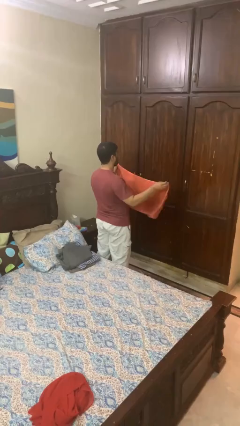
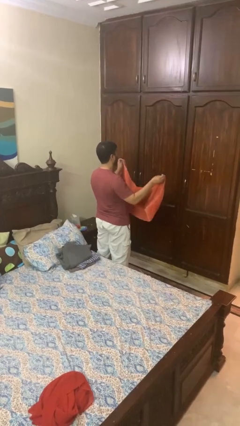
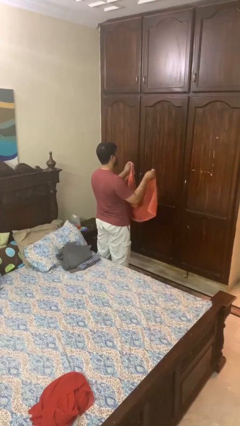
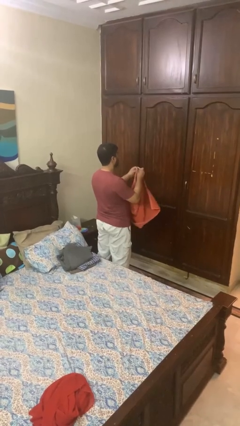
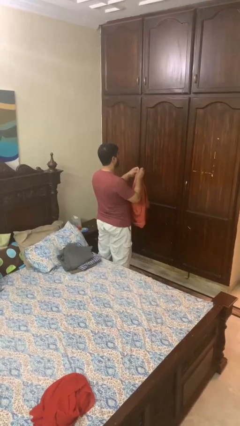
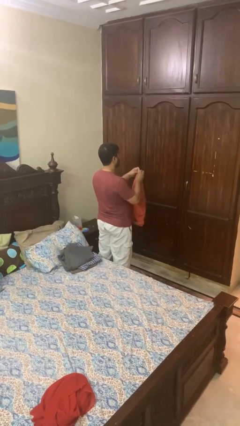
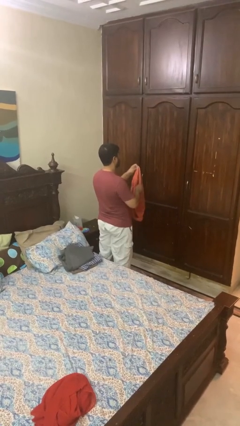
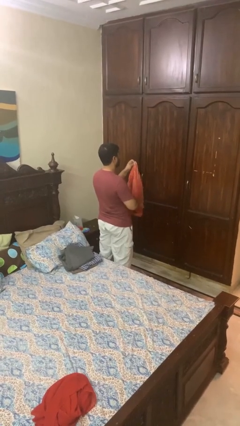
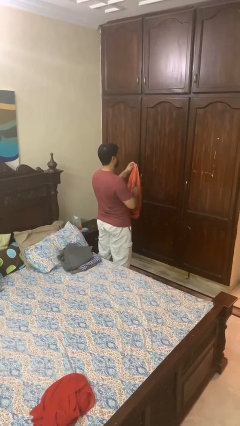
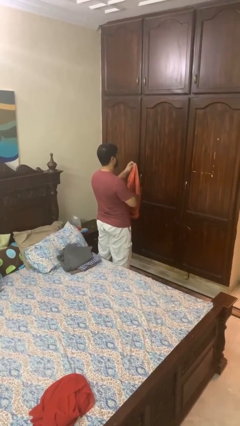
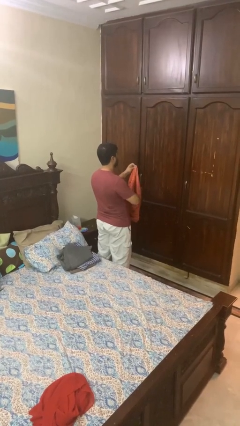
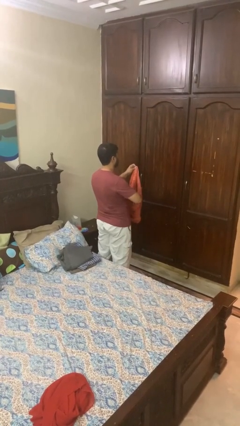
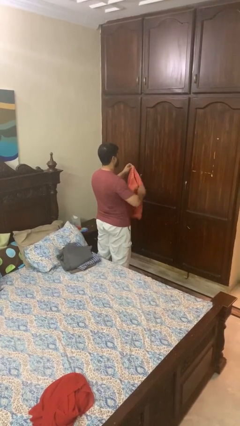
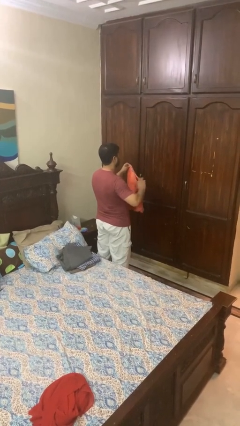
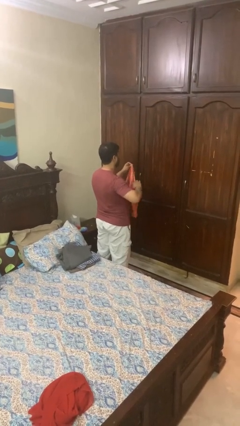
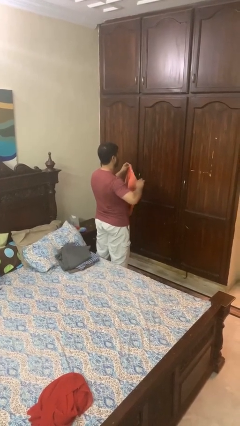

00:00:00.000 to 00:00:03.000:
person folds towel

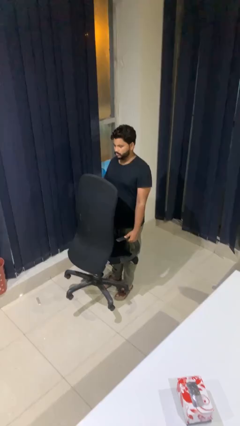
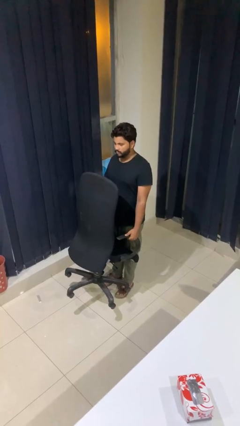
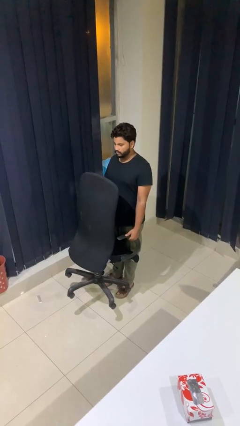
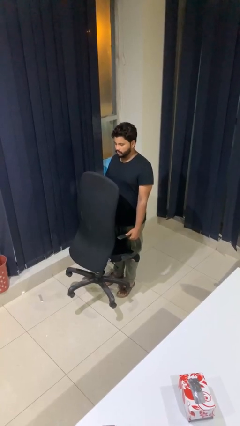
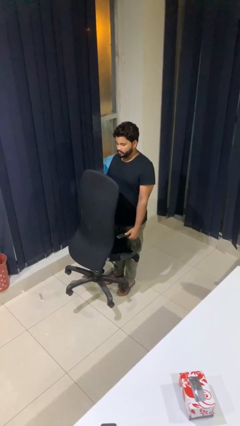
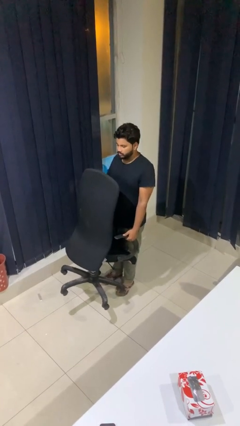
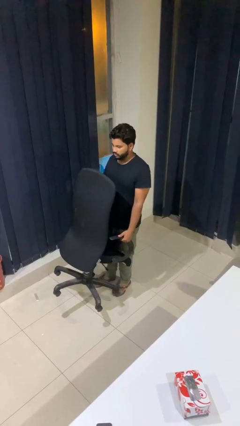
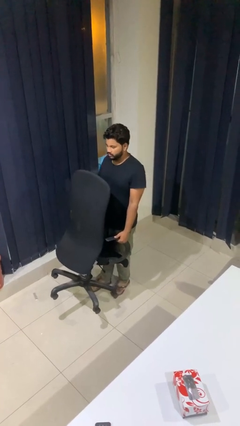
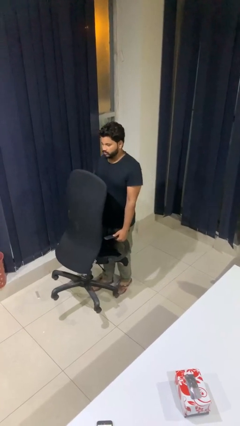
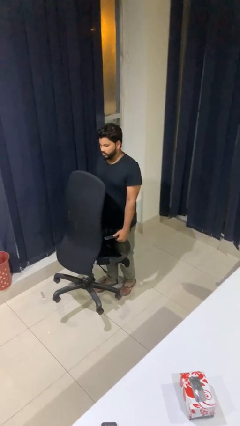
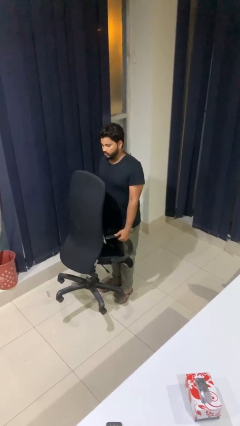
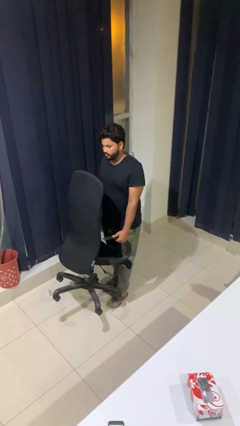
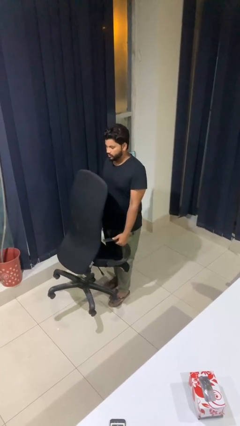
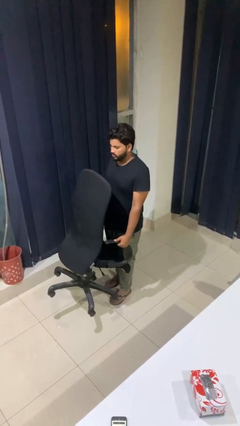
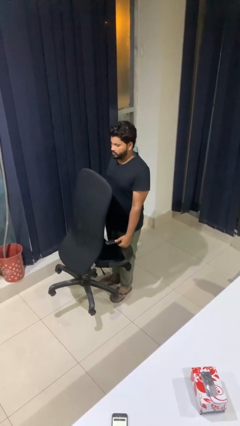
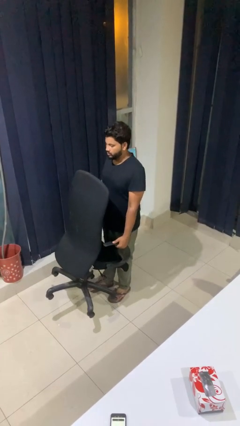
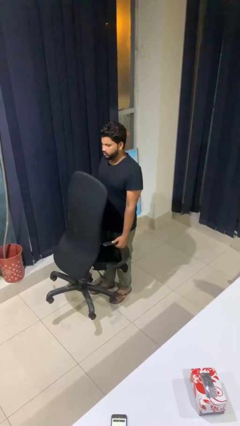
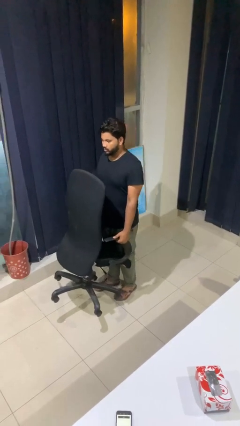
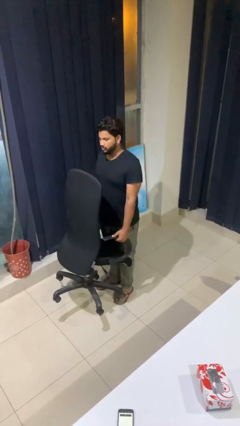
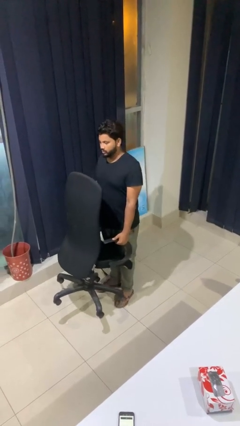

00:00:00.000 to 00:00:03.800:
person carries furniture

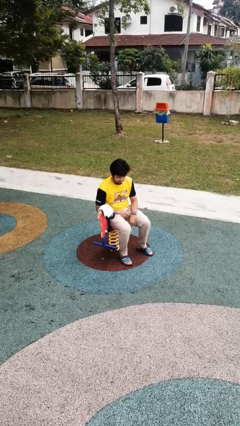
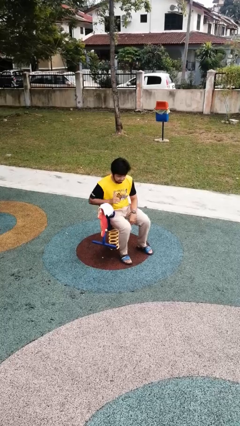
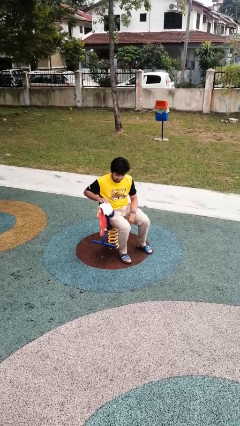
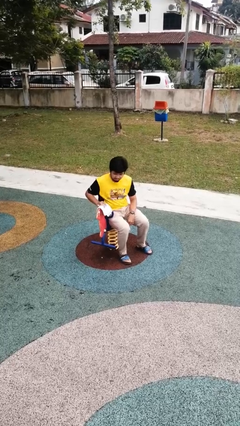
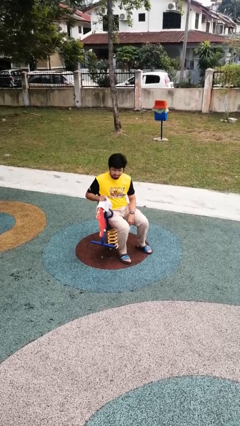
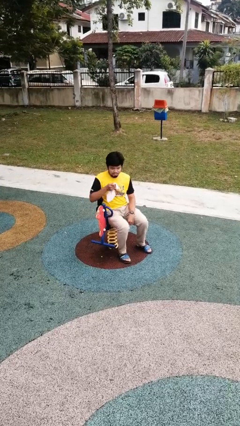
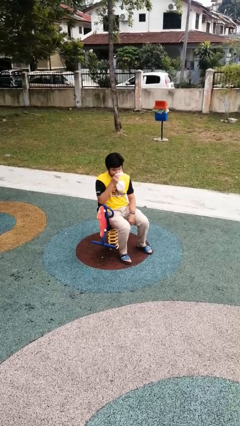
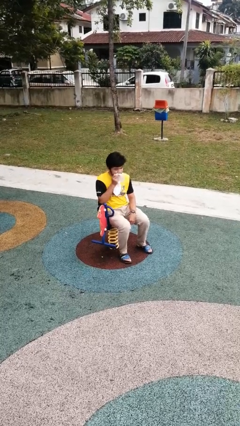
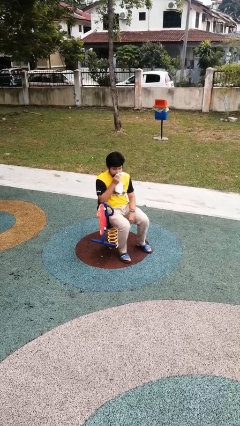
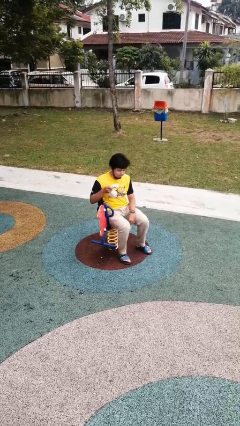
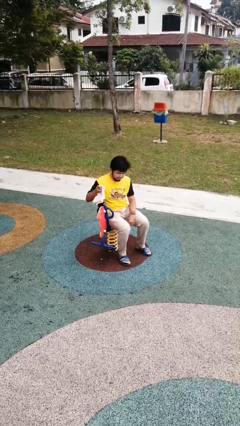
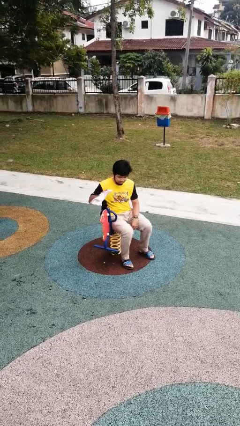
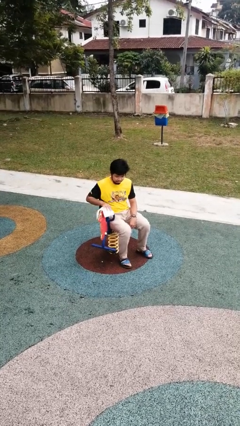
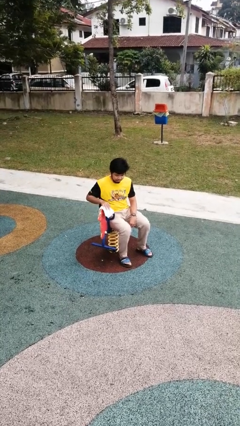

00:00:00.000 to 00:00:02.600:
person wipes mouth with napkin

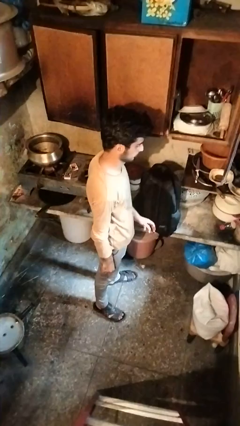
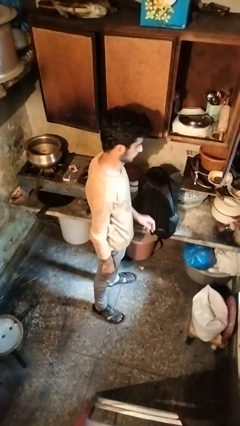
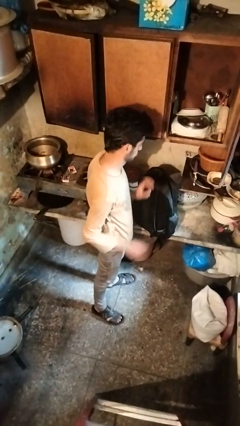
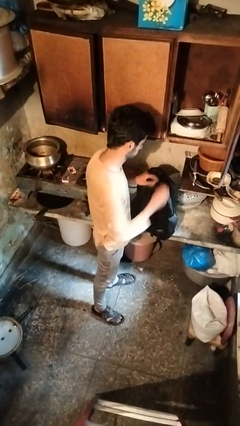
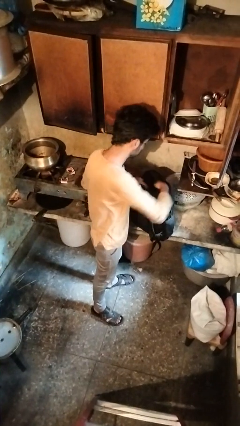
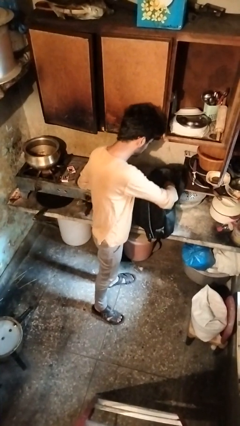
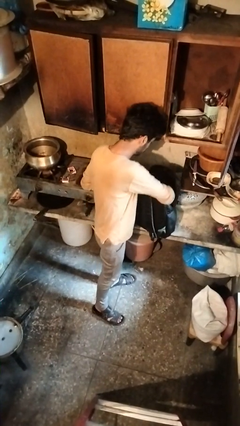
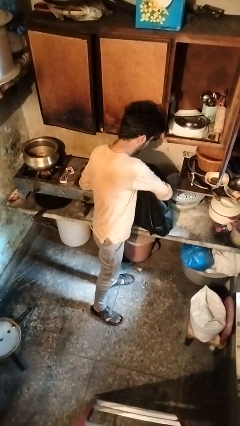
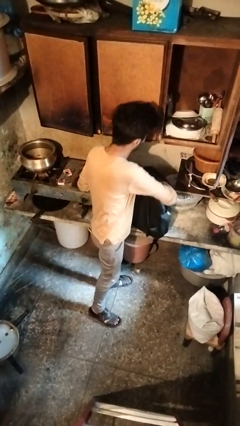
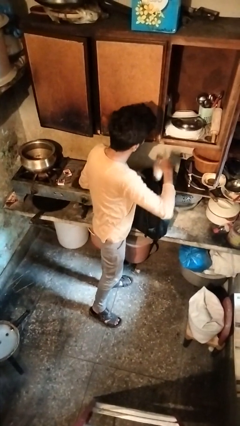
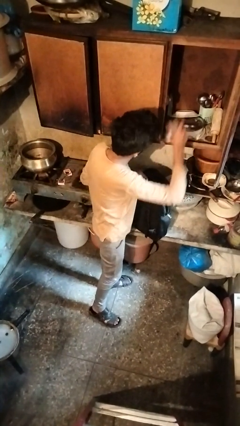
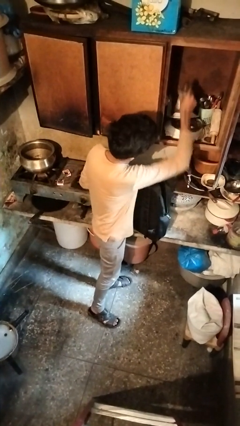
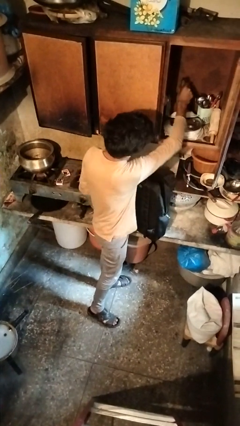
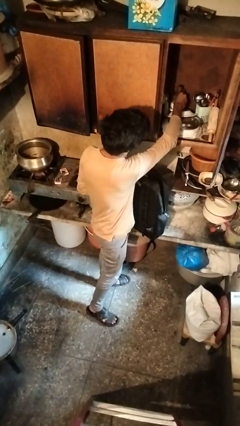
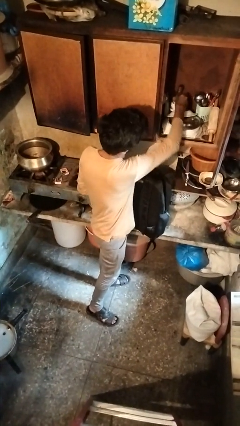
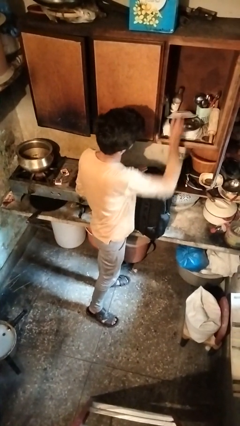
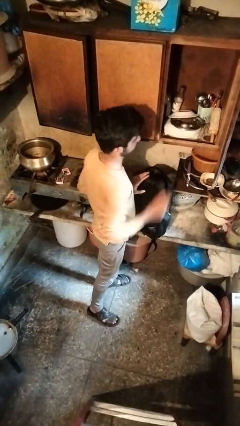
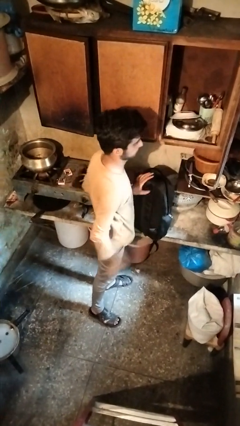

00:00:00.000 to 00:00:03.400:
person loads groceries into cabinet

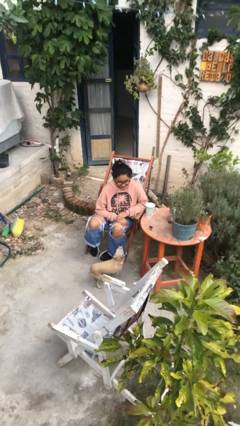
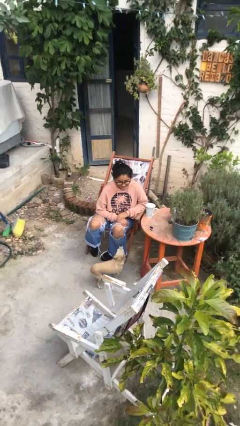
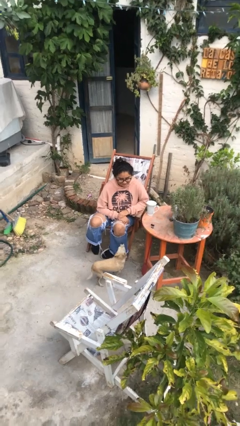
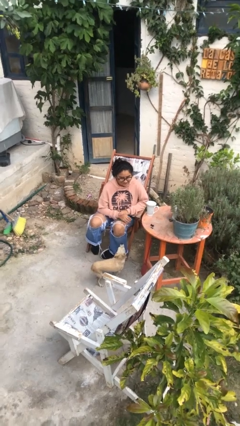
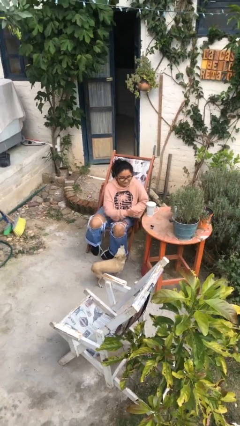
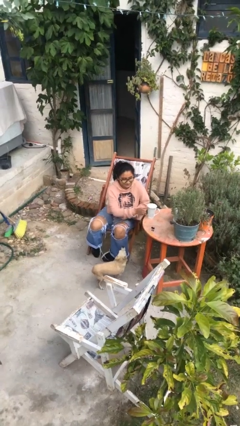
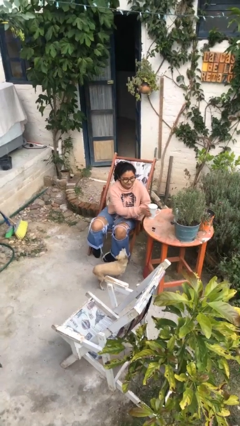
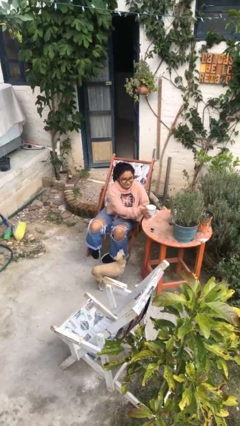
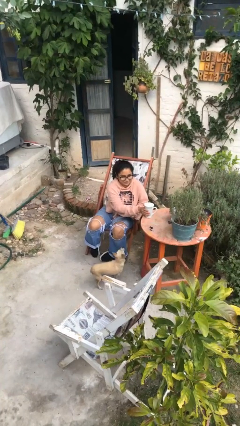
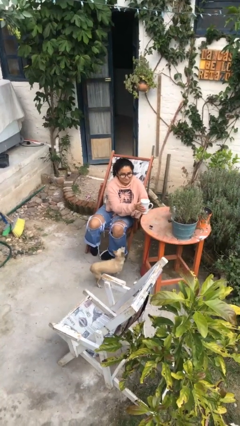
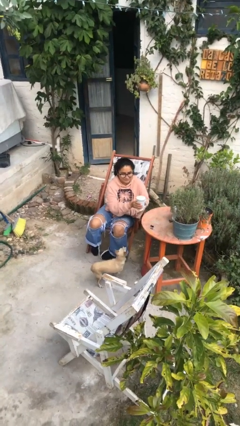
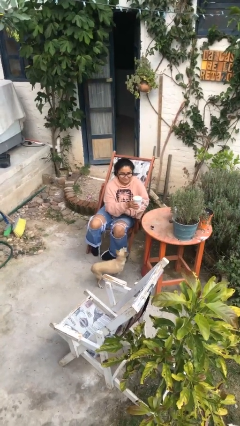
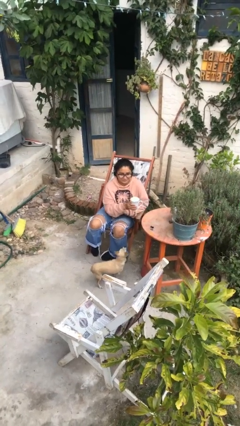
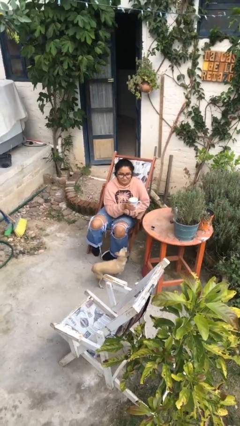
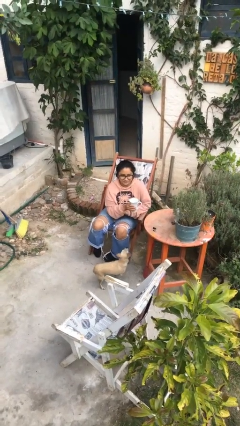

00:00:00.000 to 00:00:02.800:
person picks up object from table

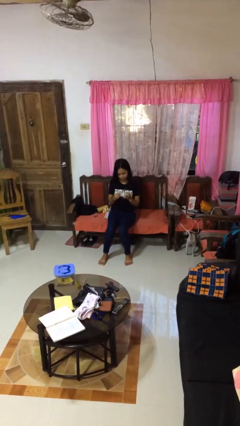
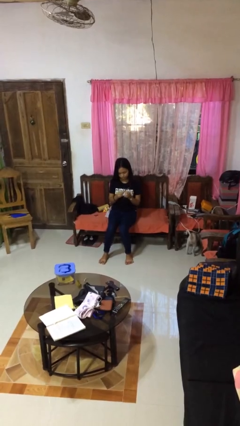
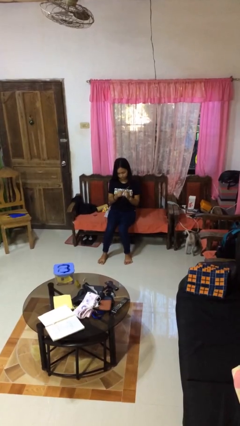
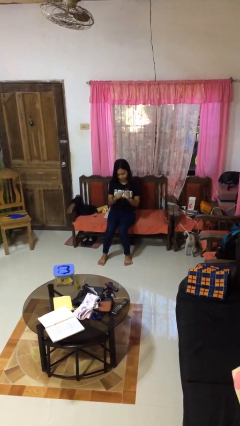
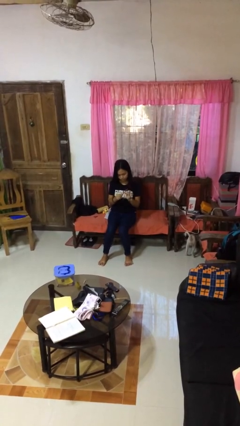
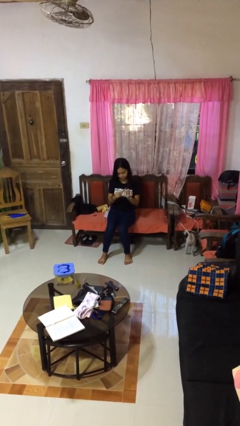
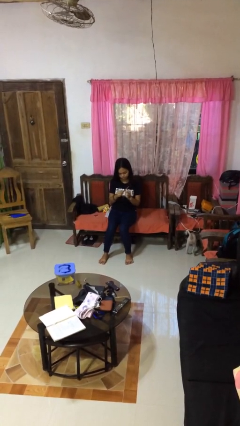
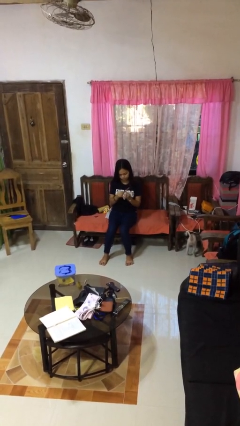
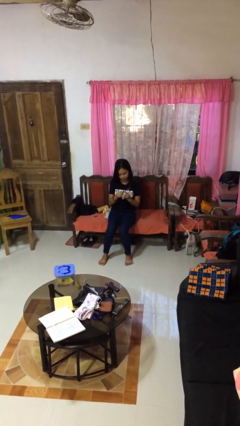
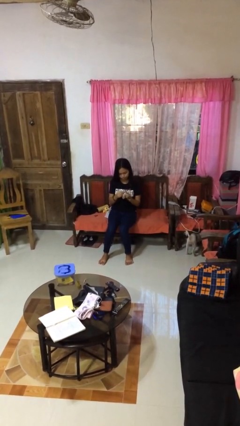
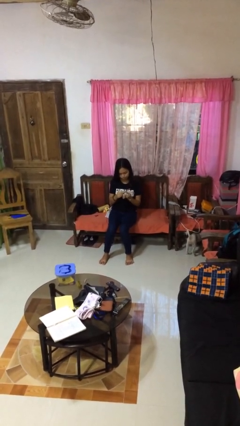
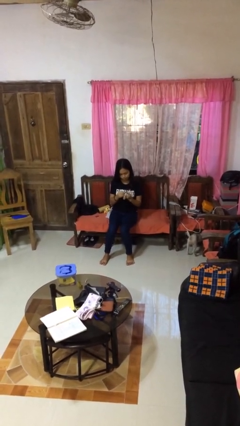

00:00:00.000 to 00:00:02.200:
person files fingernails
